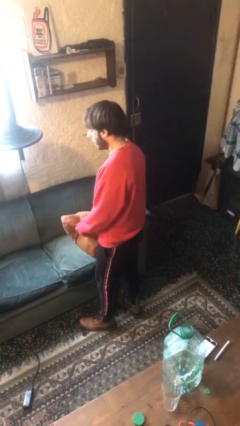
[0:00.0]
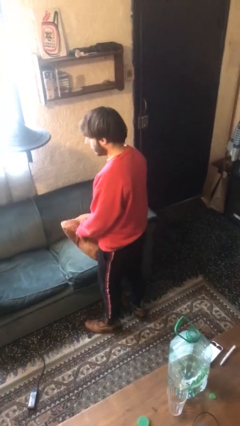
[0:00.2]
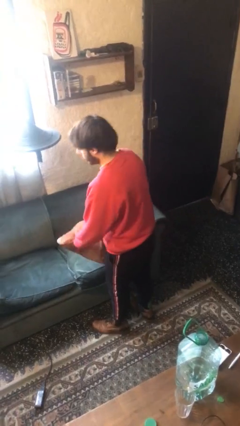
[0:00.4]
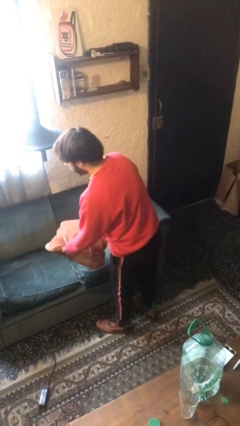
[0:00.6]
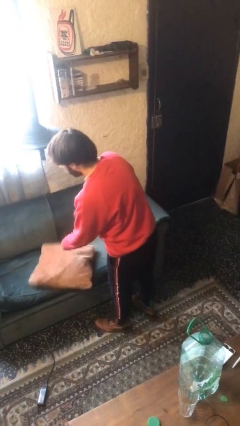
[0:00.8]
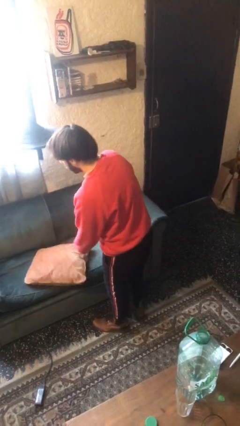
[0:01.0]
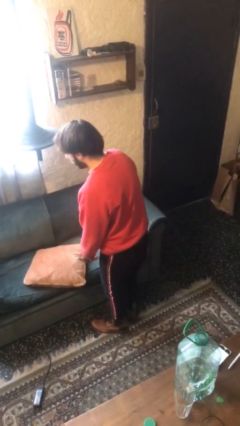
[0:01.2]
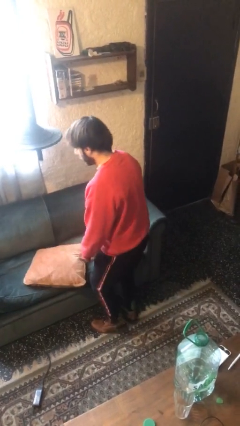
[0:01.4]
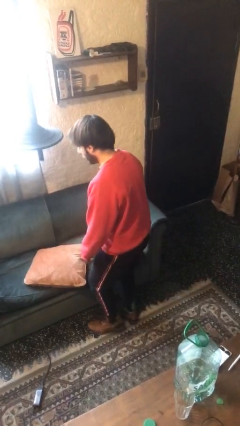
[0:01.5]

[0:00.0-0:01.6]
person puts down object on couch

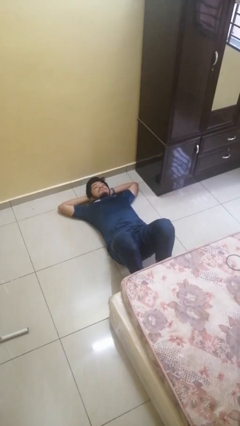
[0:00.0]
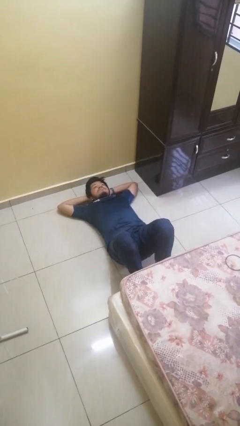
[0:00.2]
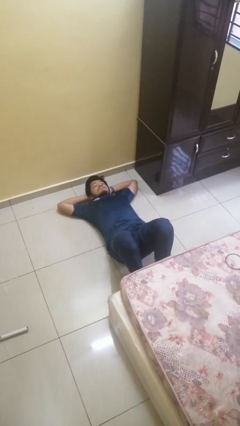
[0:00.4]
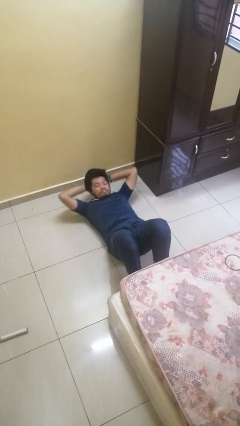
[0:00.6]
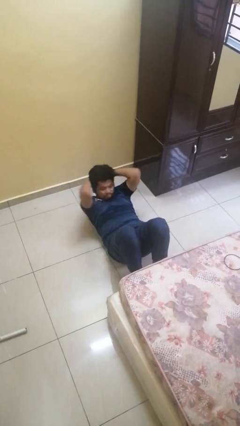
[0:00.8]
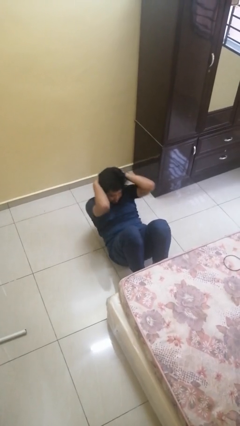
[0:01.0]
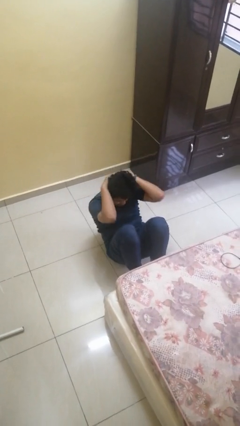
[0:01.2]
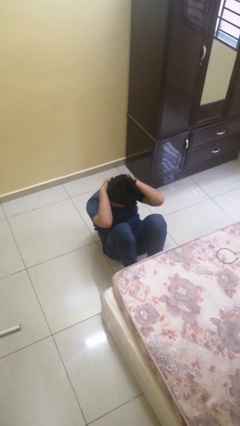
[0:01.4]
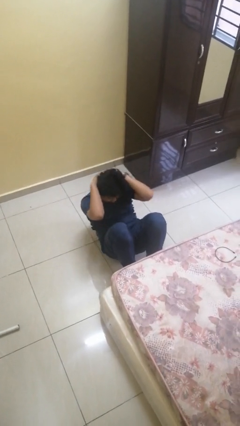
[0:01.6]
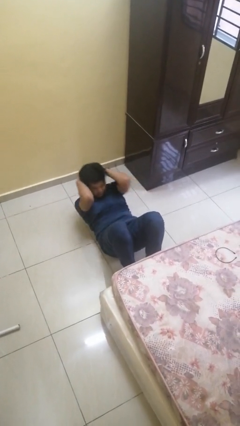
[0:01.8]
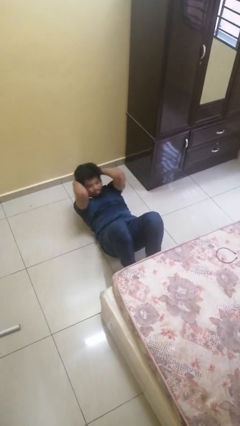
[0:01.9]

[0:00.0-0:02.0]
person exercises with situp

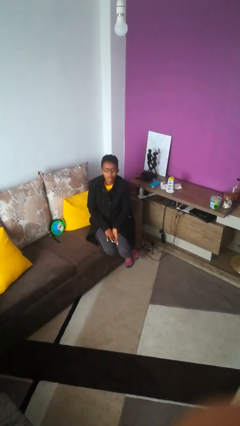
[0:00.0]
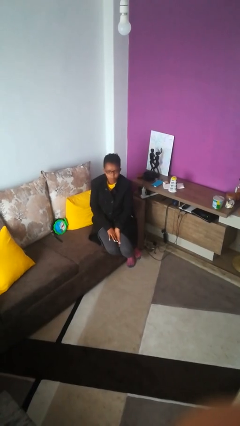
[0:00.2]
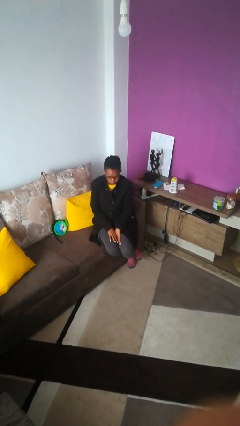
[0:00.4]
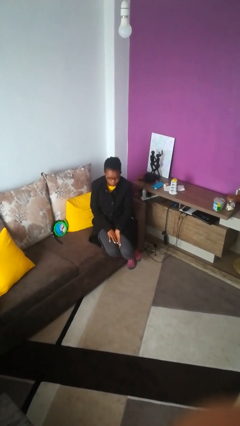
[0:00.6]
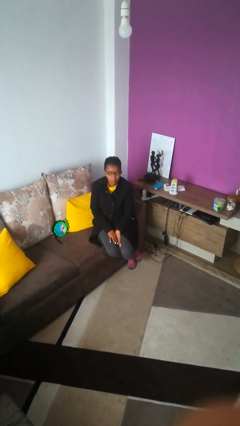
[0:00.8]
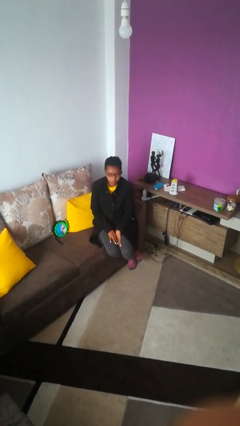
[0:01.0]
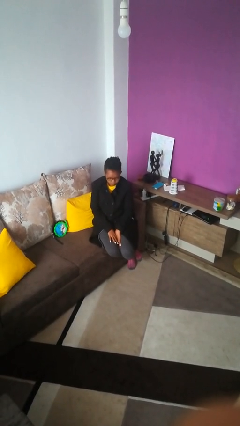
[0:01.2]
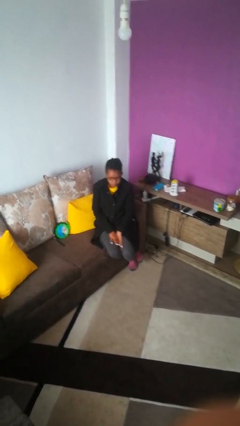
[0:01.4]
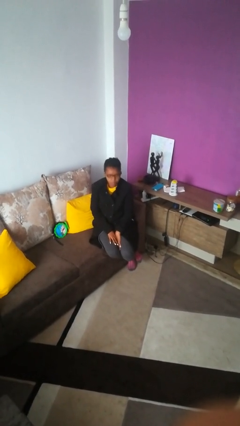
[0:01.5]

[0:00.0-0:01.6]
person nods head

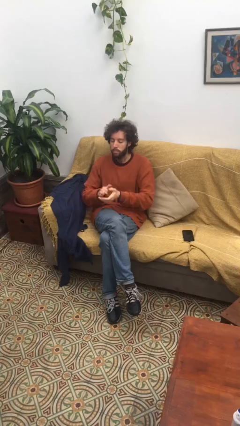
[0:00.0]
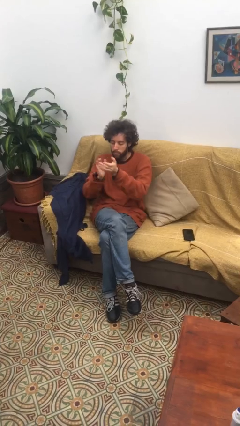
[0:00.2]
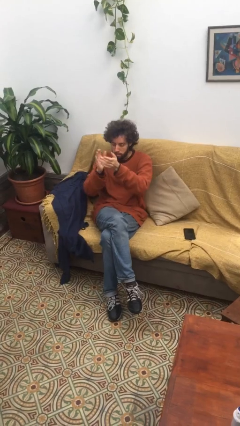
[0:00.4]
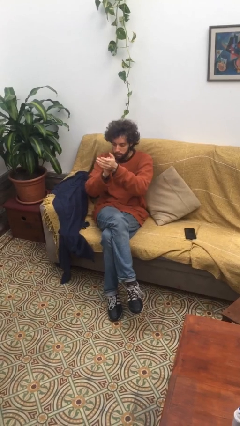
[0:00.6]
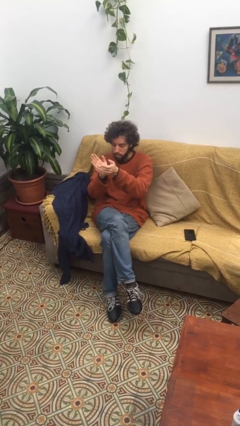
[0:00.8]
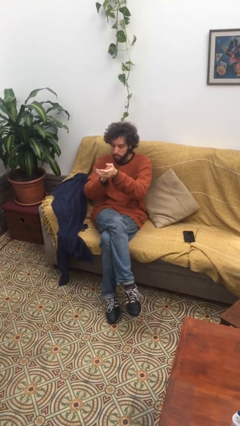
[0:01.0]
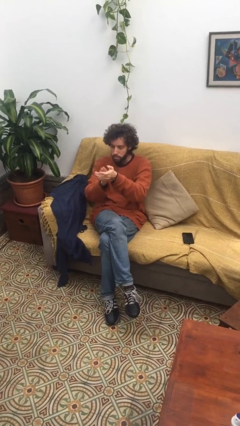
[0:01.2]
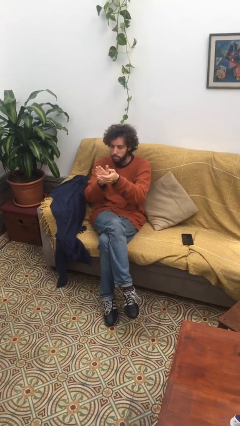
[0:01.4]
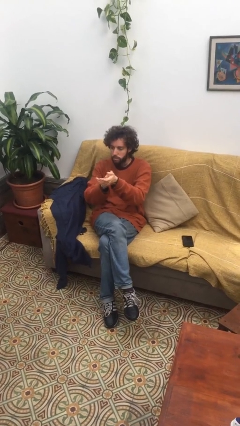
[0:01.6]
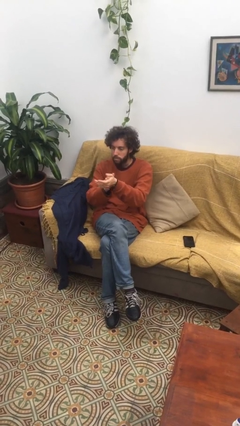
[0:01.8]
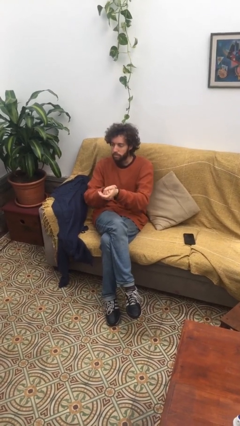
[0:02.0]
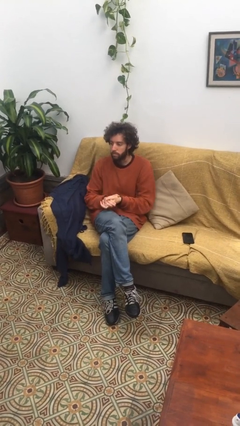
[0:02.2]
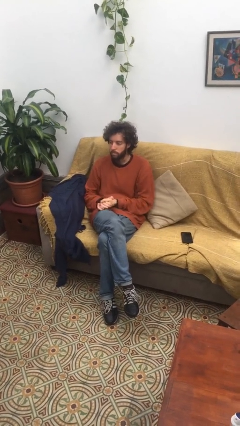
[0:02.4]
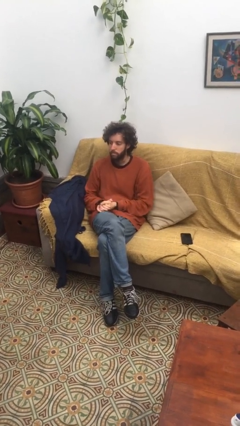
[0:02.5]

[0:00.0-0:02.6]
person claps hands

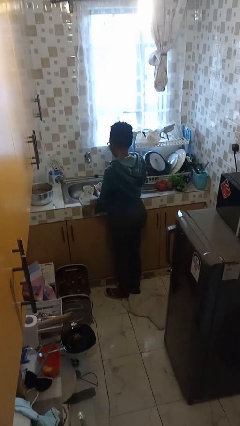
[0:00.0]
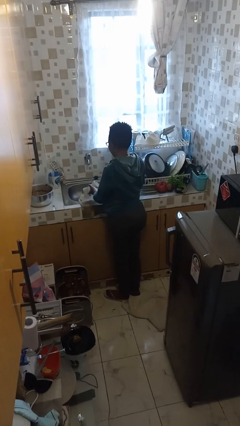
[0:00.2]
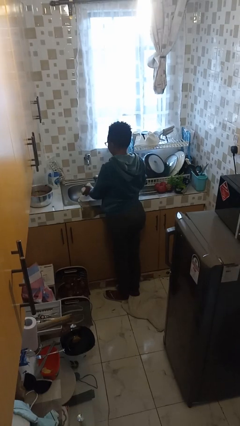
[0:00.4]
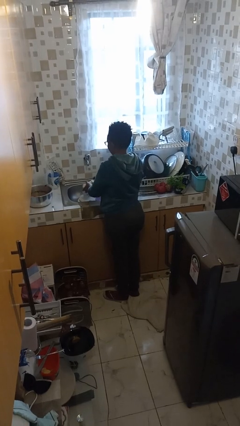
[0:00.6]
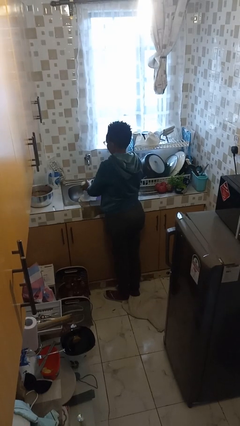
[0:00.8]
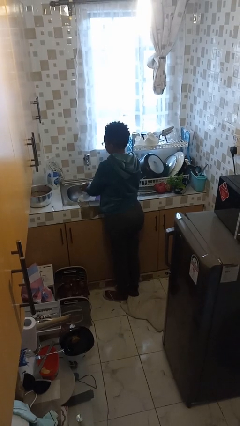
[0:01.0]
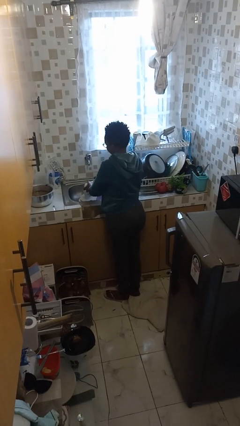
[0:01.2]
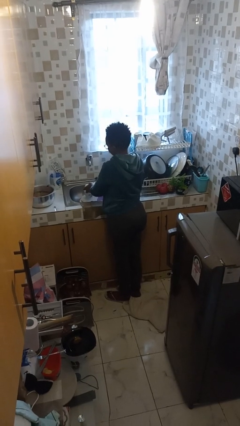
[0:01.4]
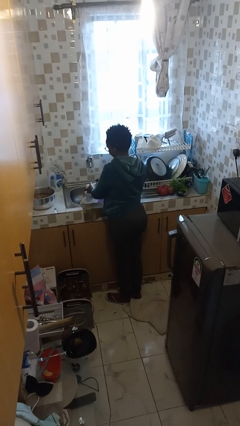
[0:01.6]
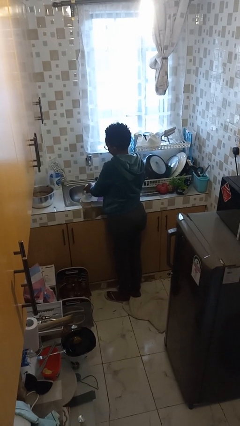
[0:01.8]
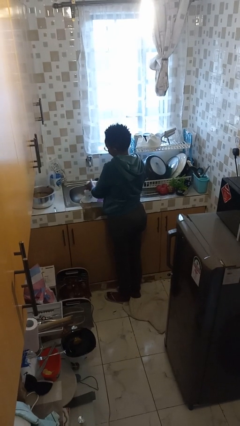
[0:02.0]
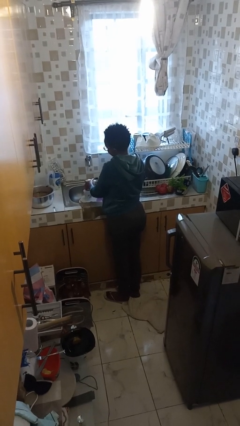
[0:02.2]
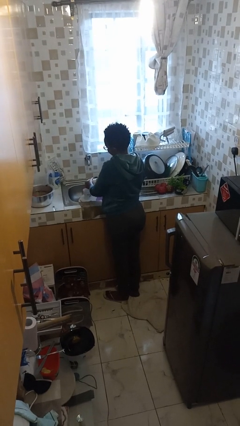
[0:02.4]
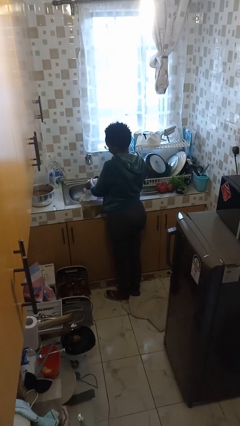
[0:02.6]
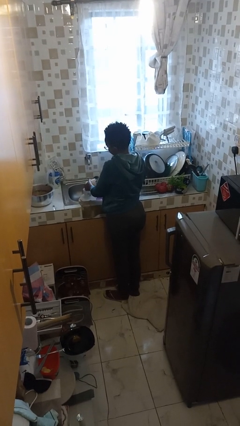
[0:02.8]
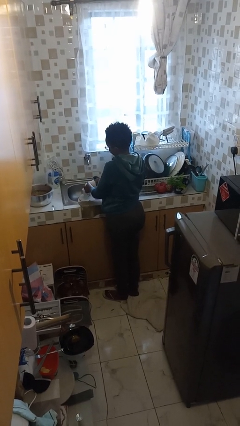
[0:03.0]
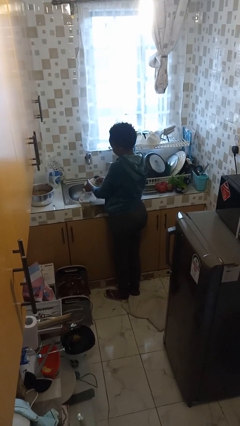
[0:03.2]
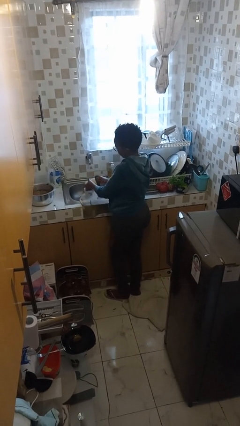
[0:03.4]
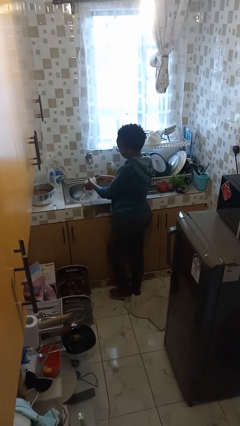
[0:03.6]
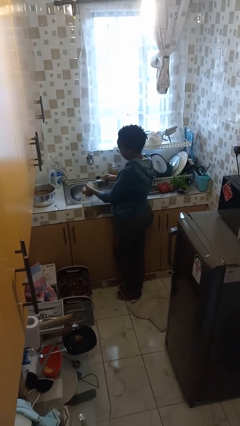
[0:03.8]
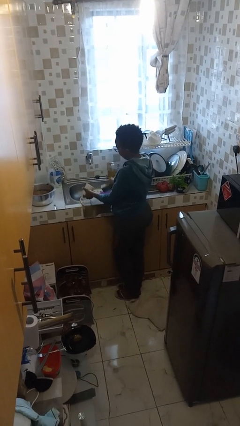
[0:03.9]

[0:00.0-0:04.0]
person washes dish

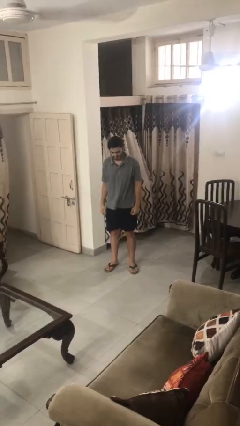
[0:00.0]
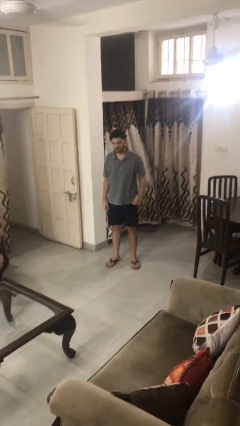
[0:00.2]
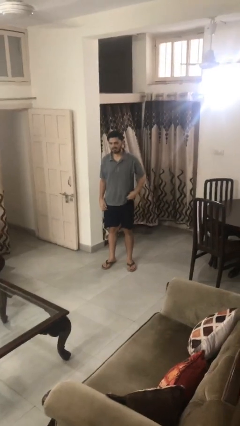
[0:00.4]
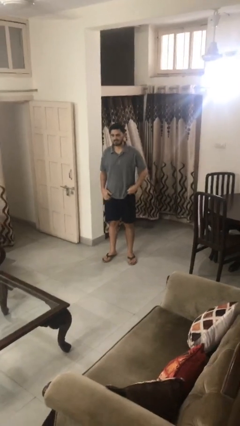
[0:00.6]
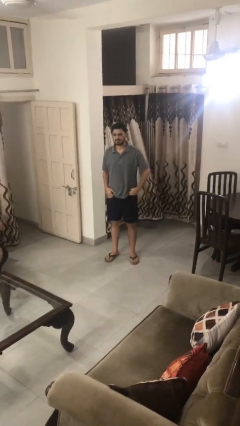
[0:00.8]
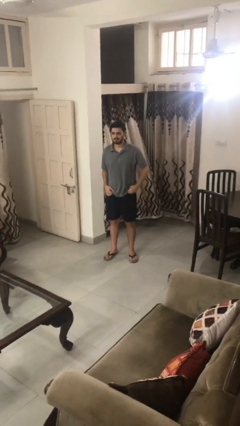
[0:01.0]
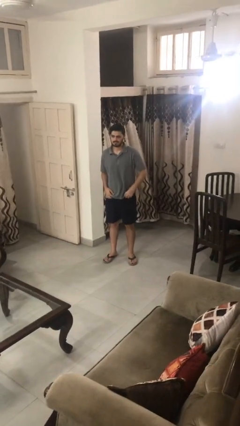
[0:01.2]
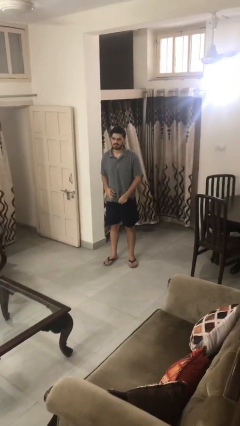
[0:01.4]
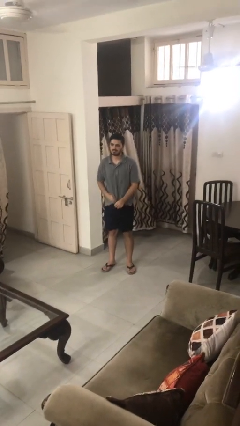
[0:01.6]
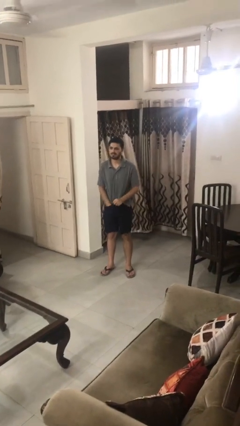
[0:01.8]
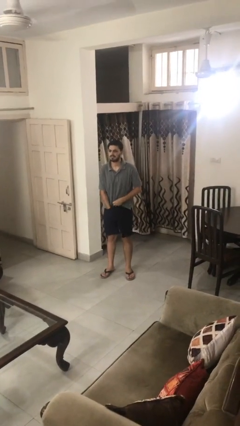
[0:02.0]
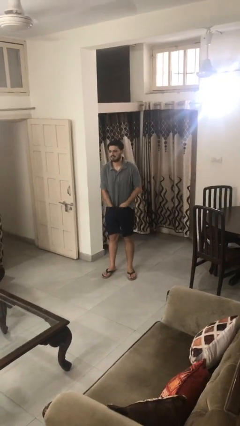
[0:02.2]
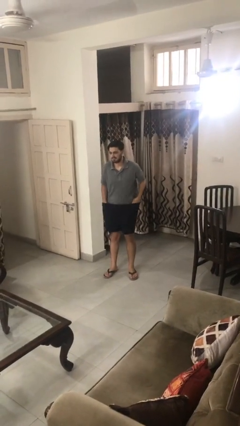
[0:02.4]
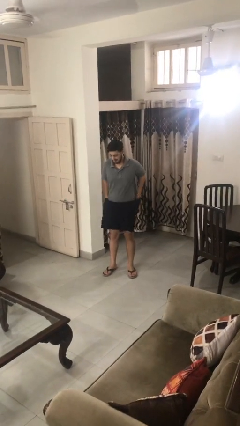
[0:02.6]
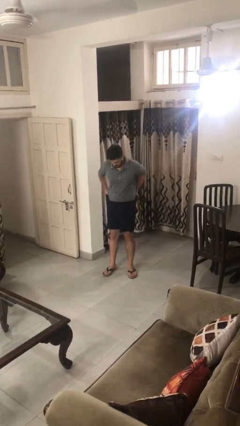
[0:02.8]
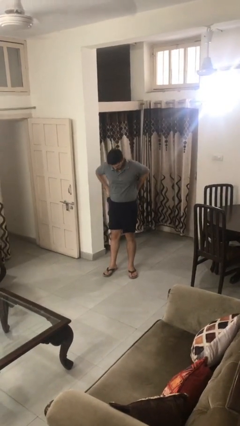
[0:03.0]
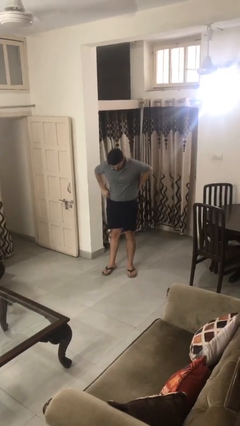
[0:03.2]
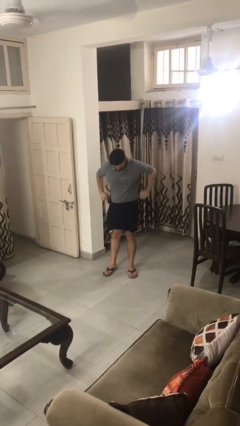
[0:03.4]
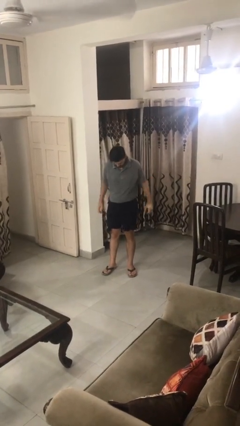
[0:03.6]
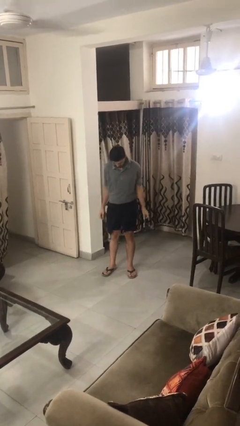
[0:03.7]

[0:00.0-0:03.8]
person tucks in shirt

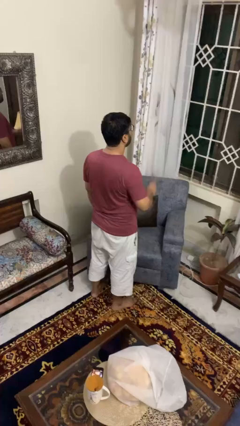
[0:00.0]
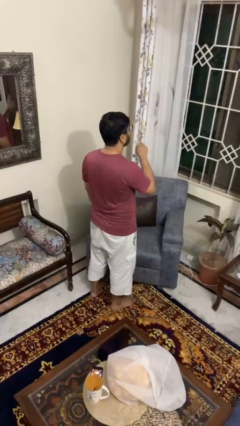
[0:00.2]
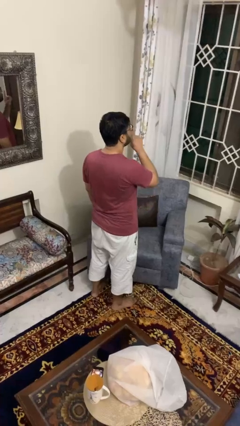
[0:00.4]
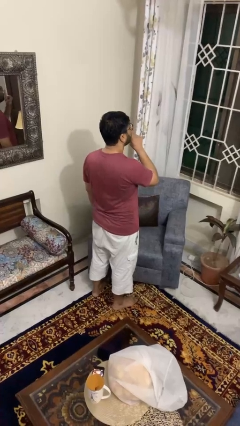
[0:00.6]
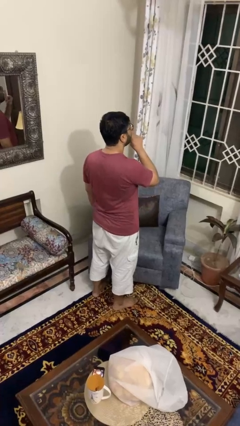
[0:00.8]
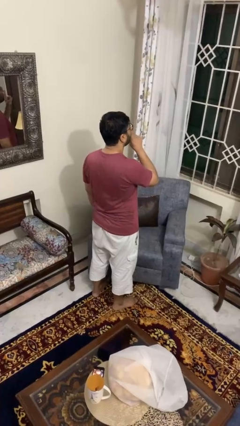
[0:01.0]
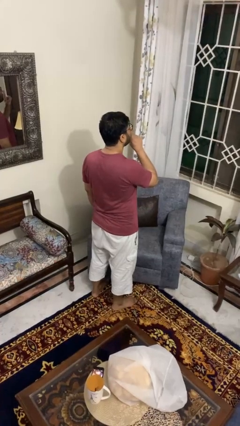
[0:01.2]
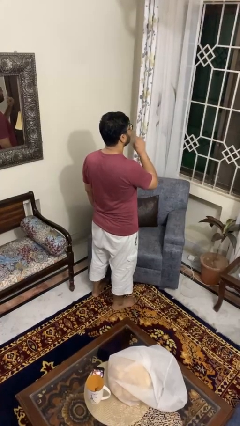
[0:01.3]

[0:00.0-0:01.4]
person gestures be quiet

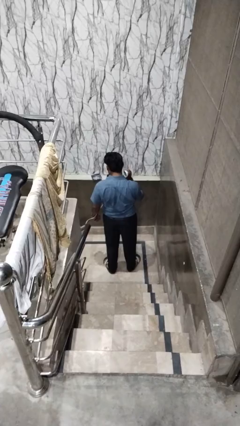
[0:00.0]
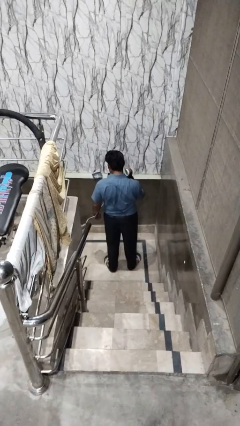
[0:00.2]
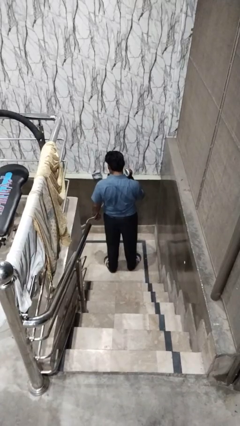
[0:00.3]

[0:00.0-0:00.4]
person dries hair with hairdryer
